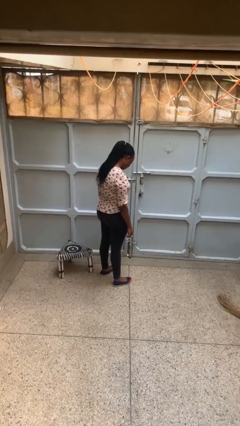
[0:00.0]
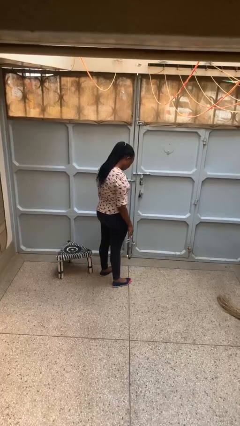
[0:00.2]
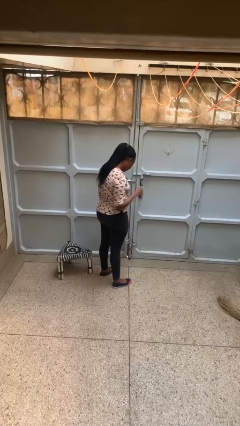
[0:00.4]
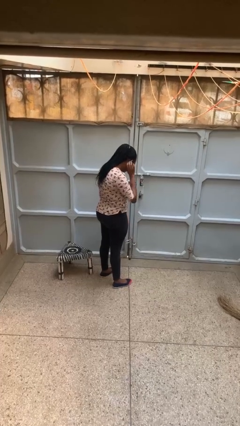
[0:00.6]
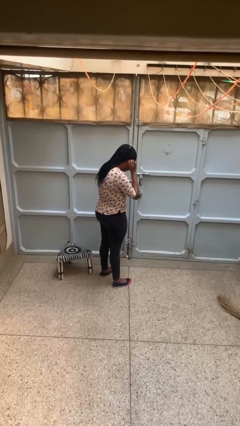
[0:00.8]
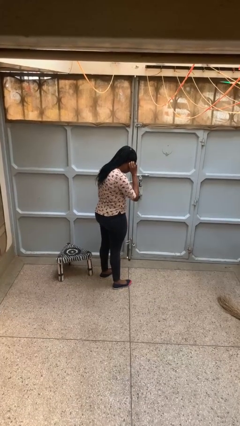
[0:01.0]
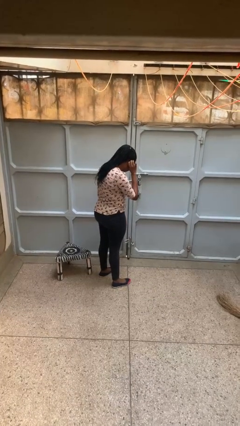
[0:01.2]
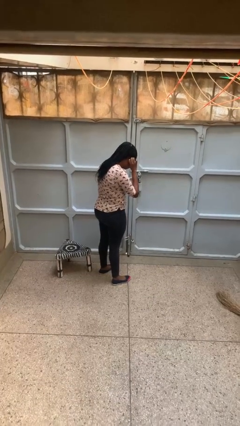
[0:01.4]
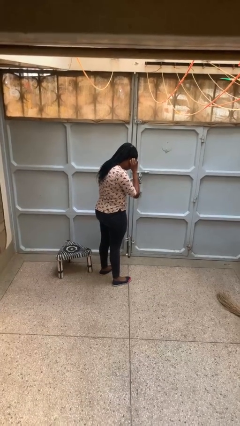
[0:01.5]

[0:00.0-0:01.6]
person gestures listen closely

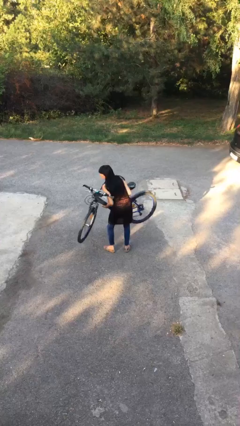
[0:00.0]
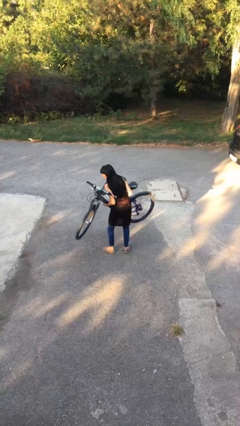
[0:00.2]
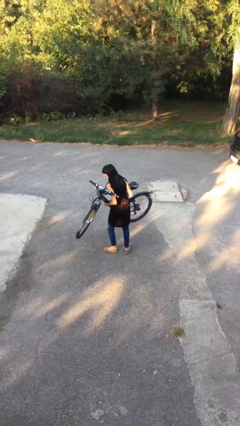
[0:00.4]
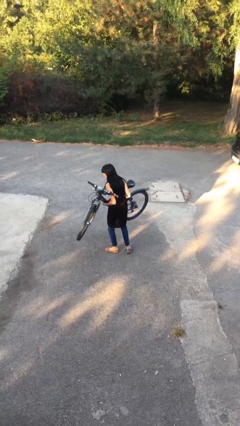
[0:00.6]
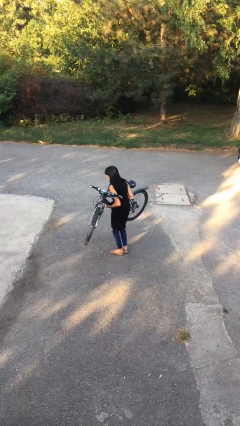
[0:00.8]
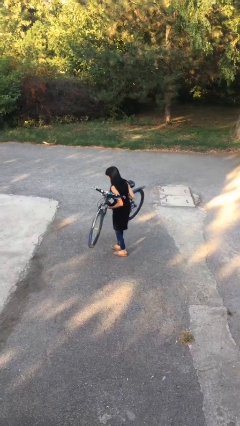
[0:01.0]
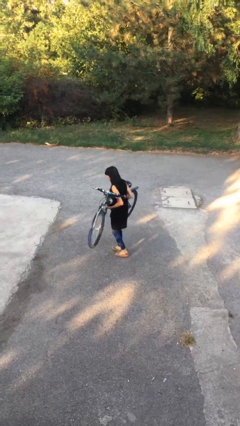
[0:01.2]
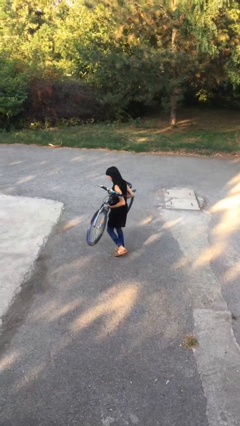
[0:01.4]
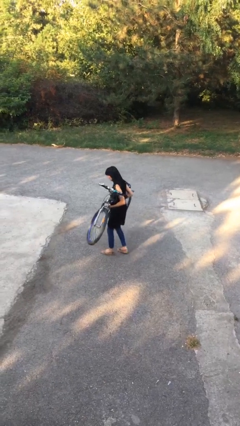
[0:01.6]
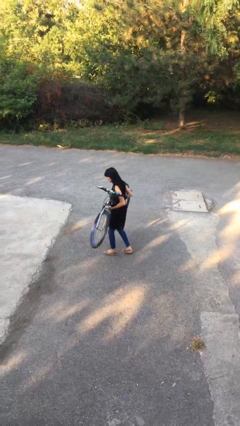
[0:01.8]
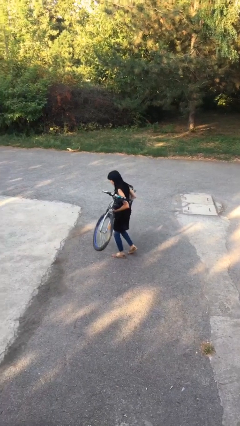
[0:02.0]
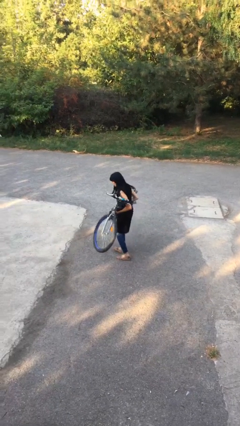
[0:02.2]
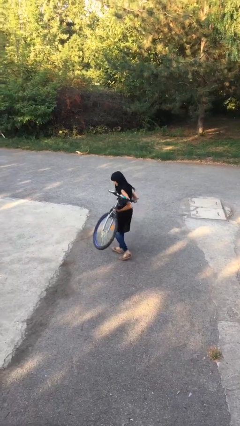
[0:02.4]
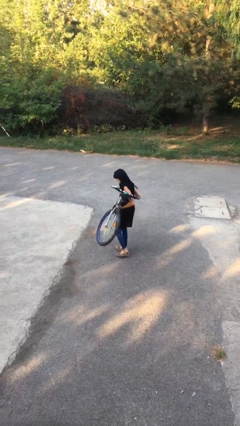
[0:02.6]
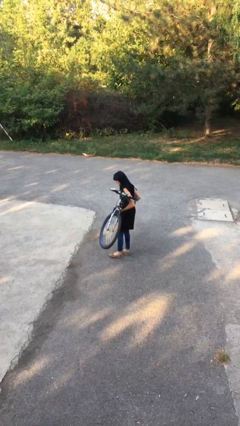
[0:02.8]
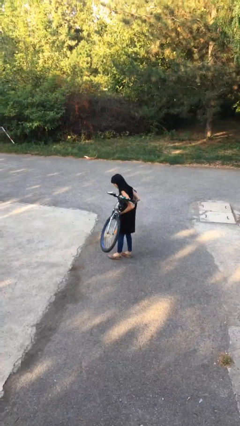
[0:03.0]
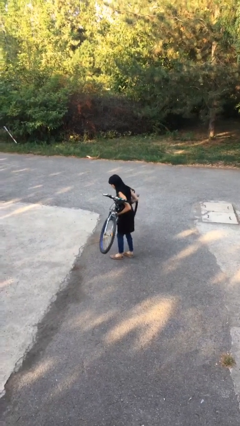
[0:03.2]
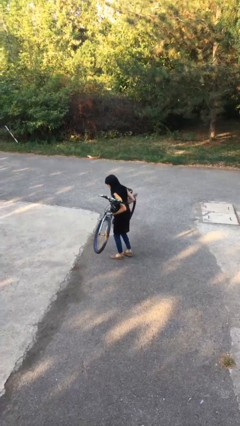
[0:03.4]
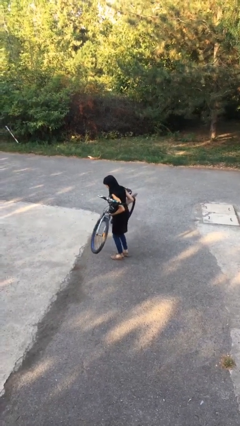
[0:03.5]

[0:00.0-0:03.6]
person carries heavy object

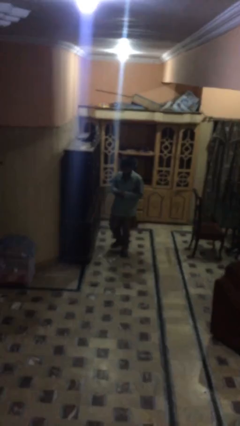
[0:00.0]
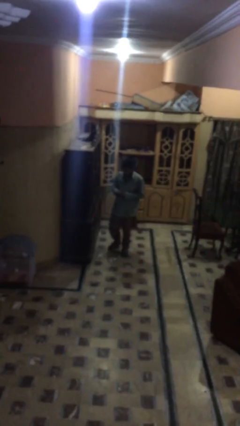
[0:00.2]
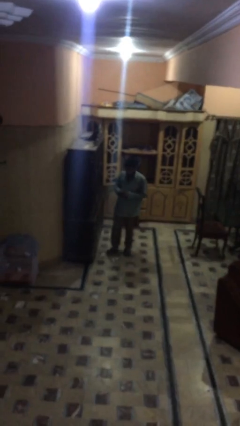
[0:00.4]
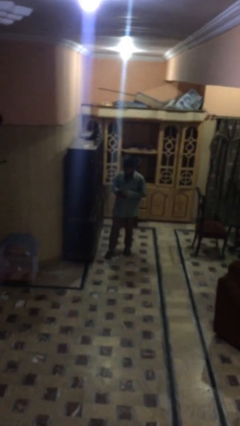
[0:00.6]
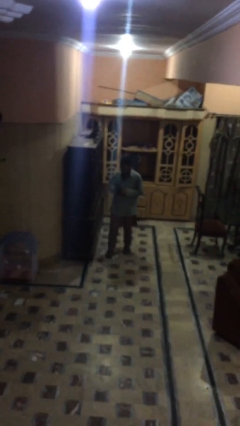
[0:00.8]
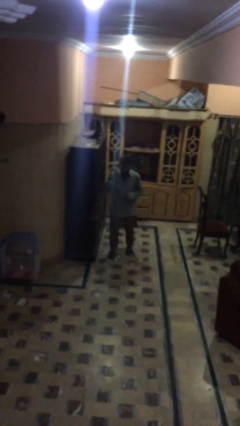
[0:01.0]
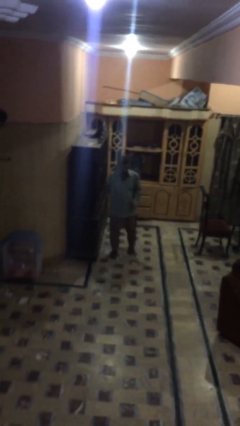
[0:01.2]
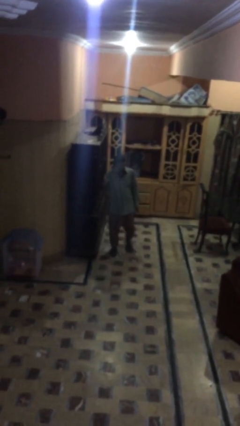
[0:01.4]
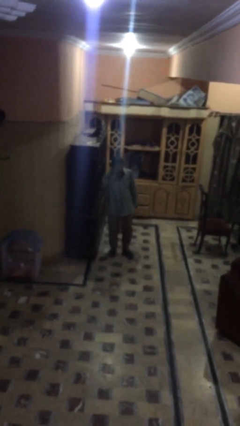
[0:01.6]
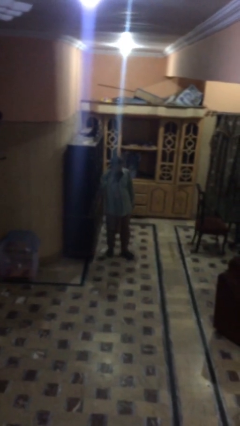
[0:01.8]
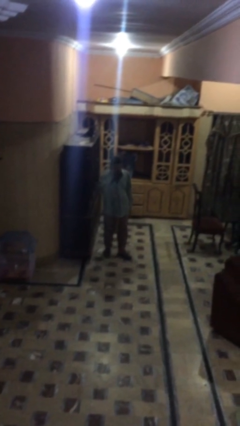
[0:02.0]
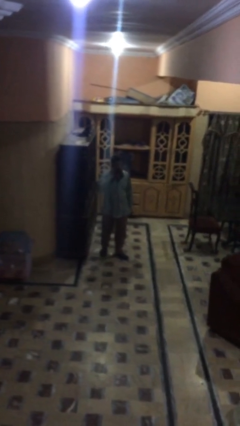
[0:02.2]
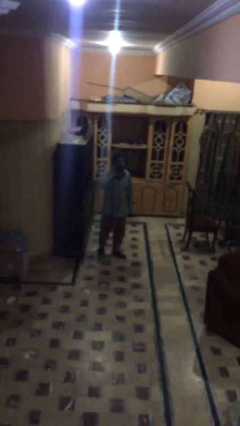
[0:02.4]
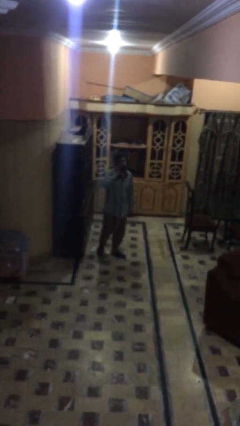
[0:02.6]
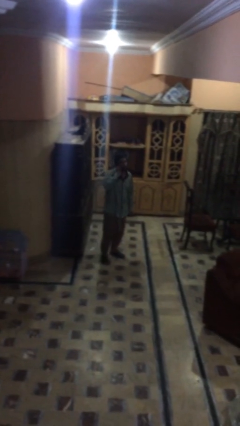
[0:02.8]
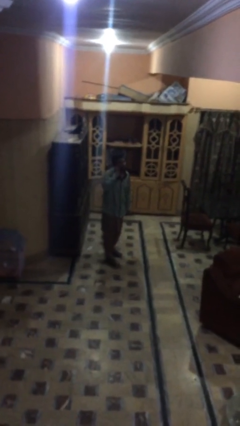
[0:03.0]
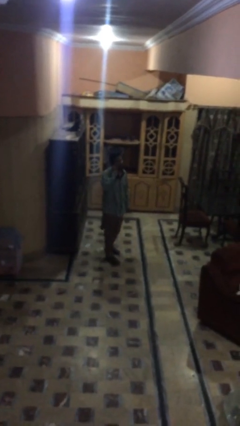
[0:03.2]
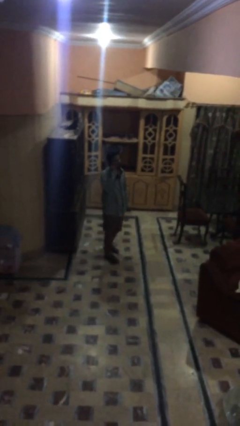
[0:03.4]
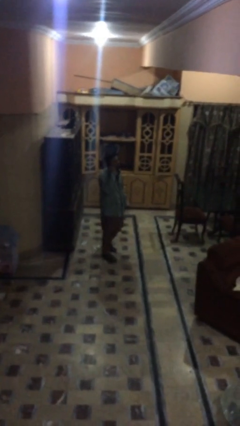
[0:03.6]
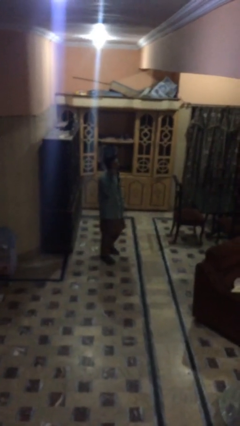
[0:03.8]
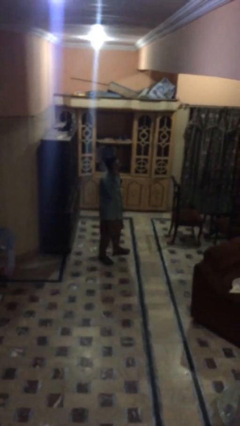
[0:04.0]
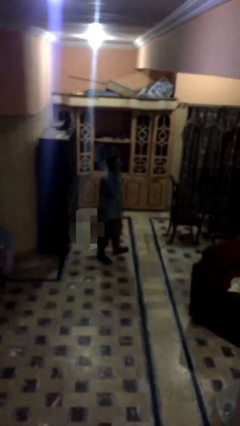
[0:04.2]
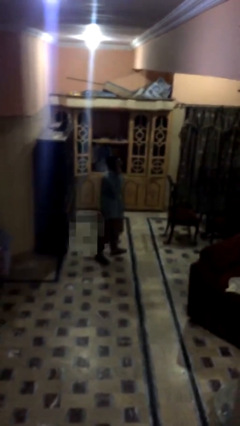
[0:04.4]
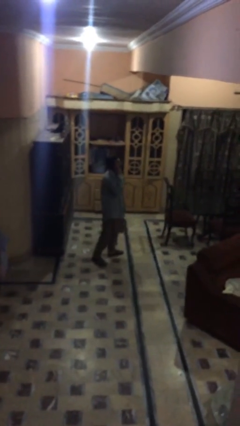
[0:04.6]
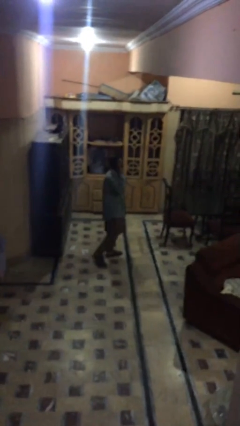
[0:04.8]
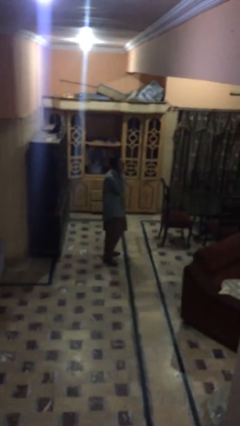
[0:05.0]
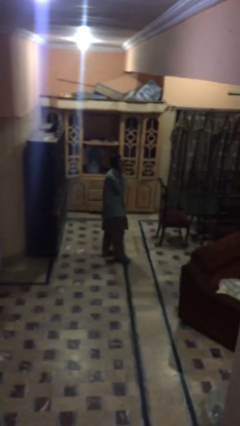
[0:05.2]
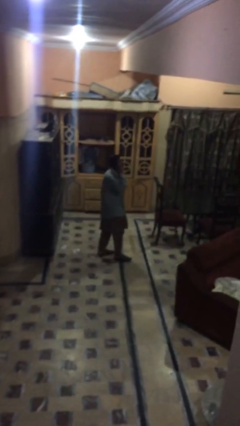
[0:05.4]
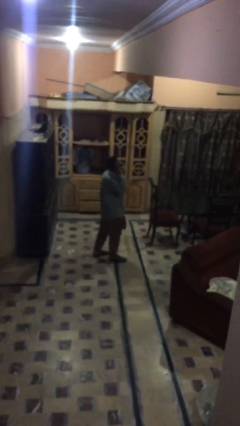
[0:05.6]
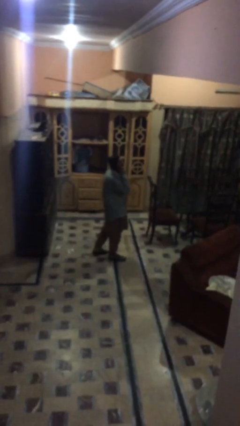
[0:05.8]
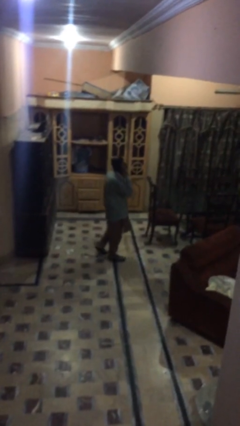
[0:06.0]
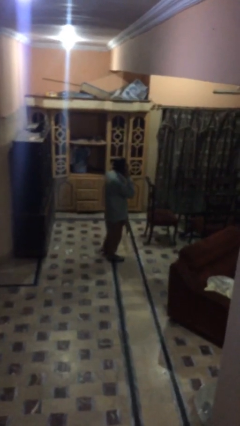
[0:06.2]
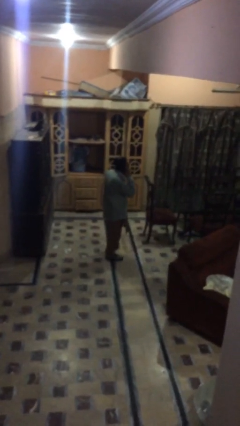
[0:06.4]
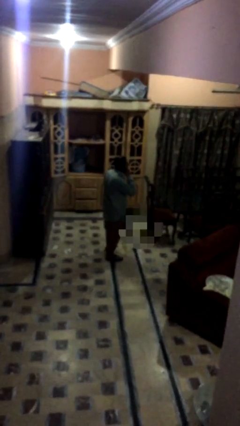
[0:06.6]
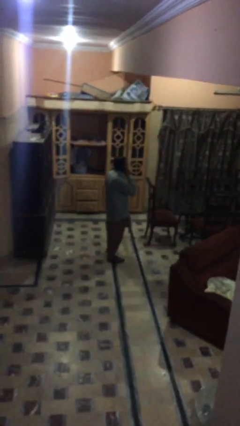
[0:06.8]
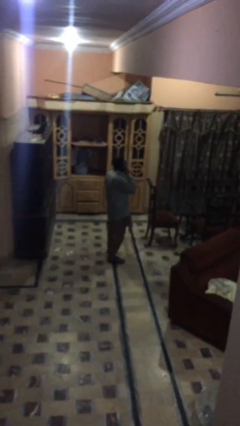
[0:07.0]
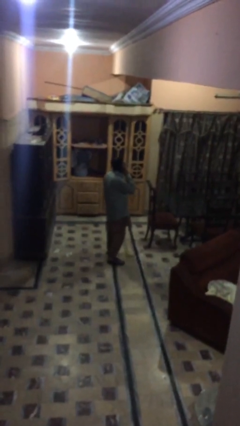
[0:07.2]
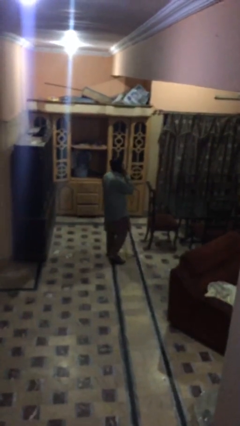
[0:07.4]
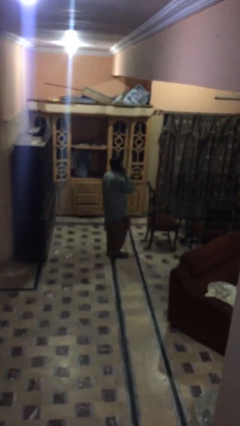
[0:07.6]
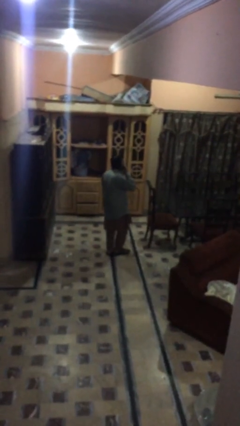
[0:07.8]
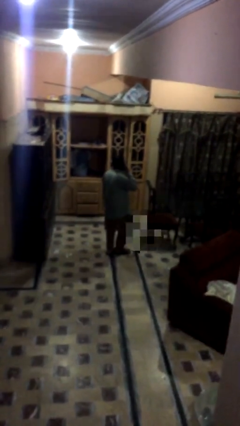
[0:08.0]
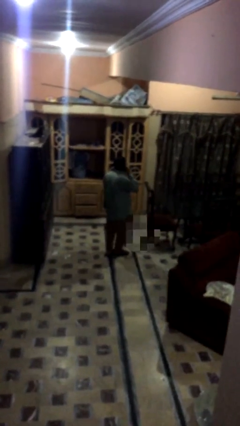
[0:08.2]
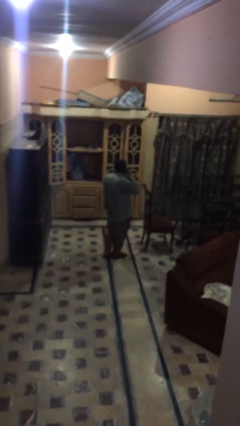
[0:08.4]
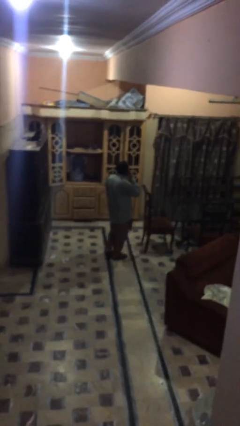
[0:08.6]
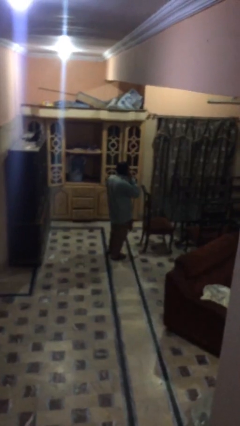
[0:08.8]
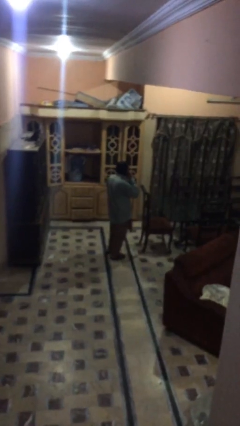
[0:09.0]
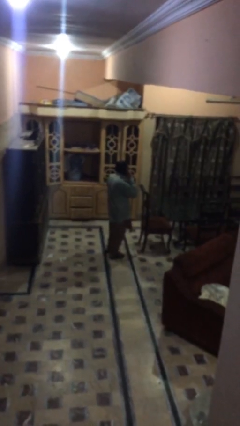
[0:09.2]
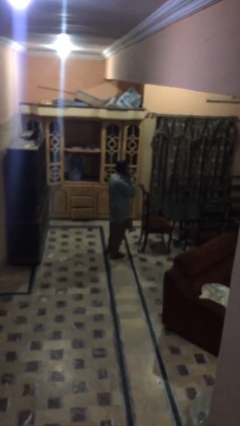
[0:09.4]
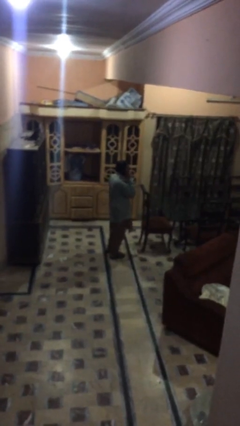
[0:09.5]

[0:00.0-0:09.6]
person talks on phone

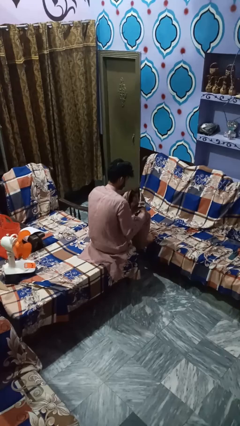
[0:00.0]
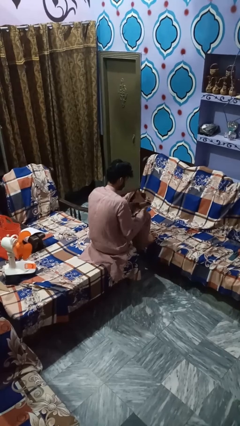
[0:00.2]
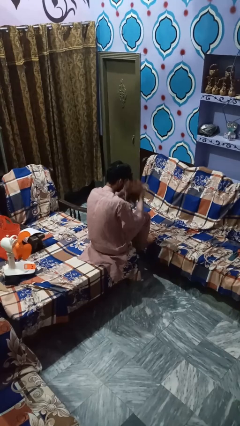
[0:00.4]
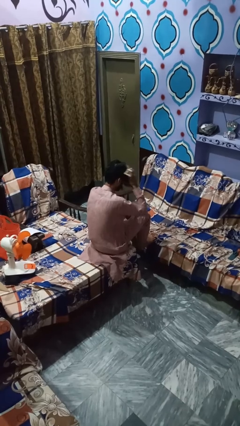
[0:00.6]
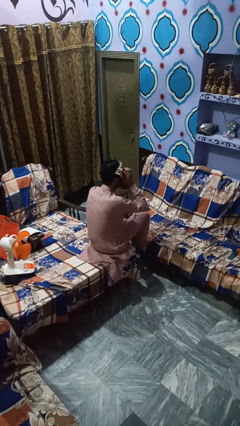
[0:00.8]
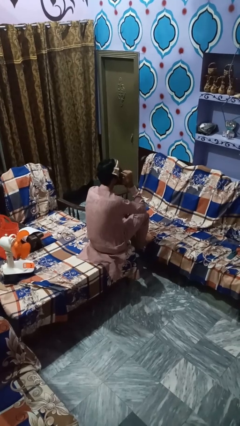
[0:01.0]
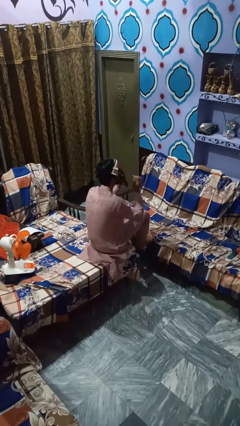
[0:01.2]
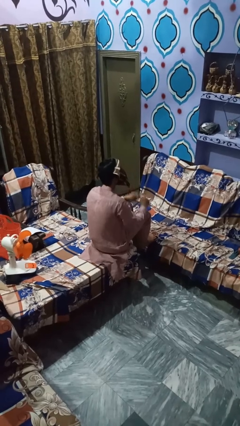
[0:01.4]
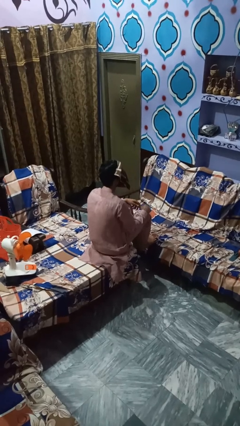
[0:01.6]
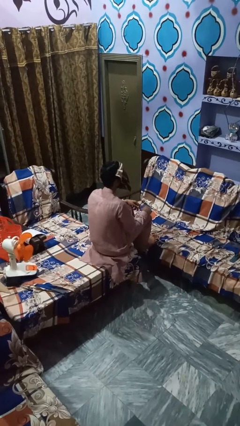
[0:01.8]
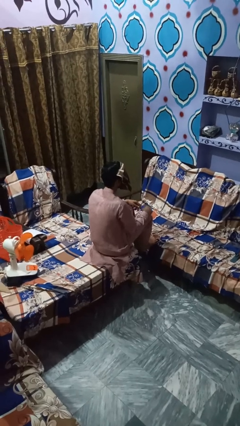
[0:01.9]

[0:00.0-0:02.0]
person yawns

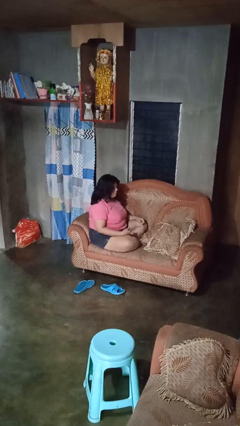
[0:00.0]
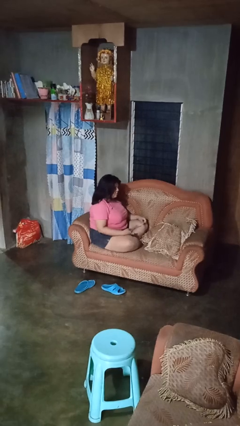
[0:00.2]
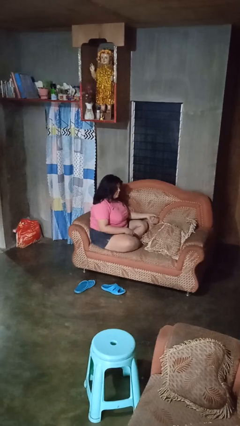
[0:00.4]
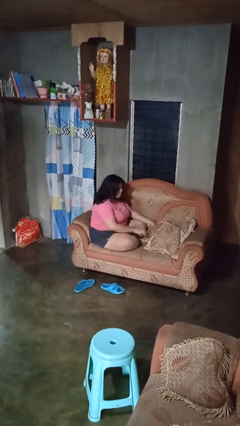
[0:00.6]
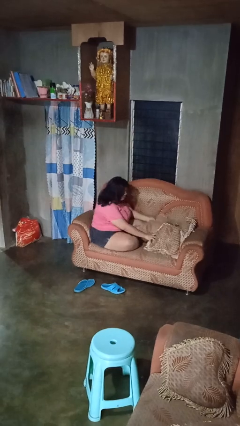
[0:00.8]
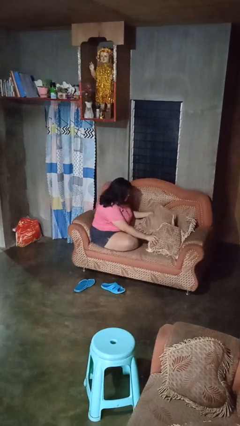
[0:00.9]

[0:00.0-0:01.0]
person searches in couch
